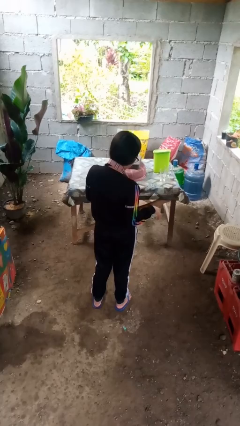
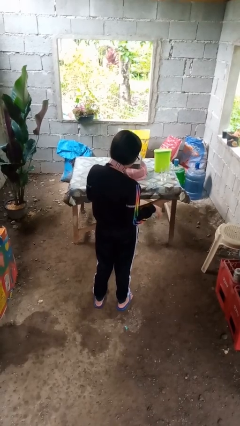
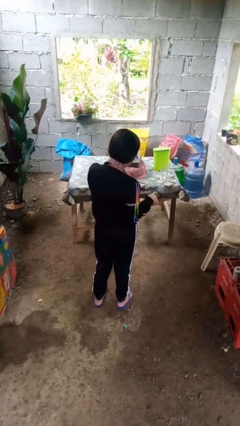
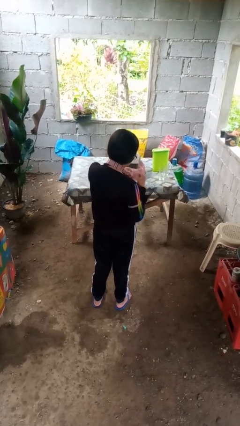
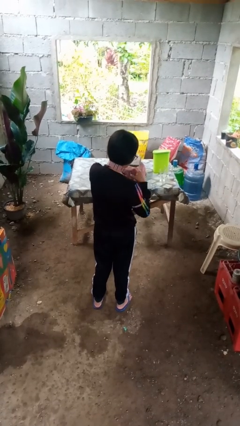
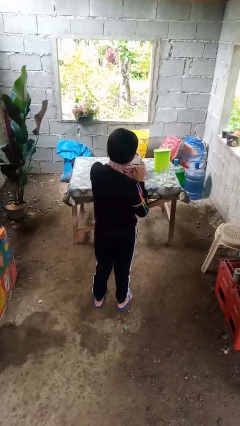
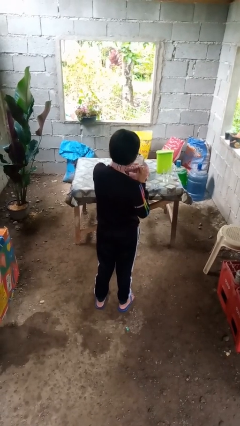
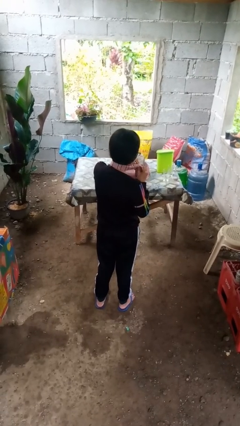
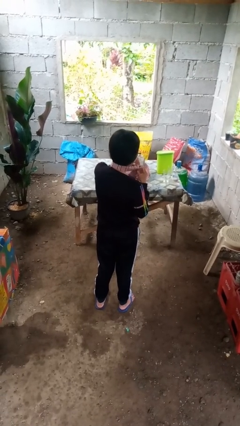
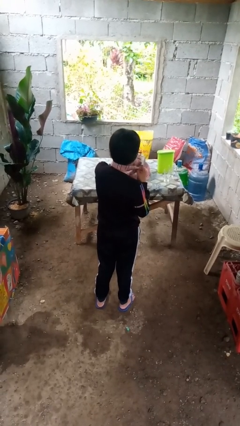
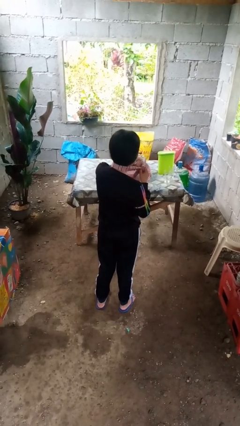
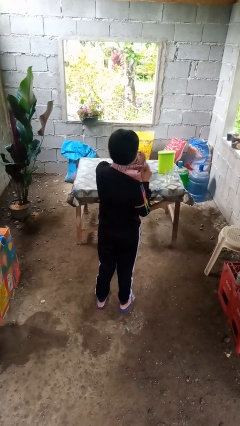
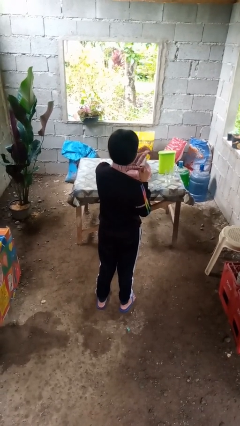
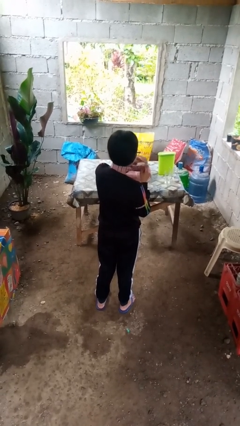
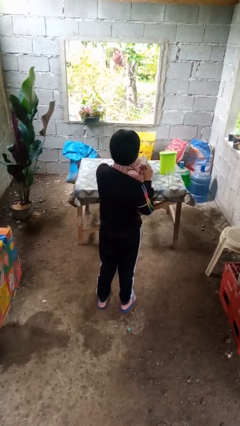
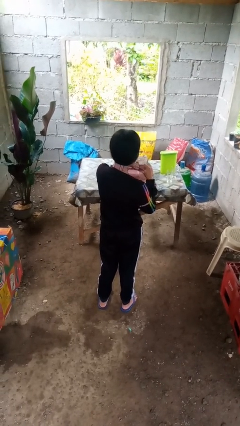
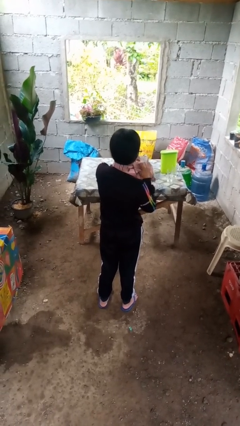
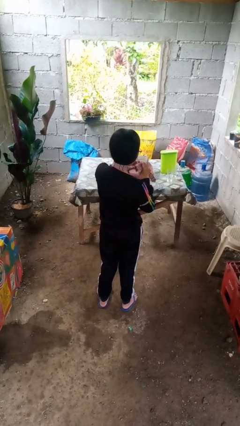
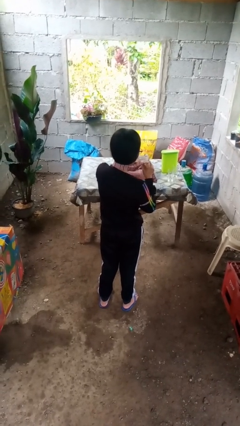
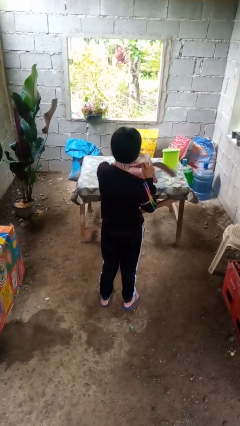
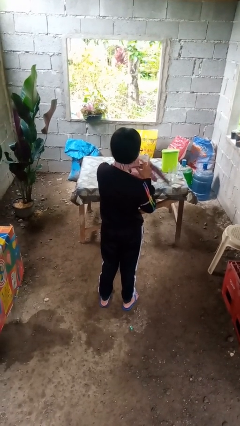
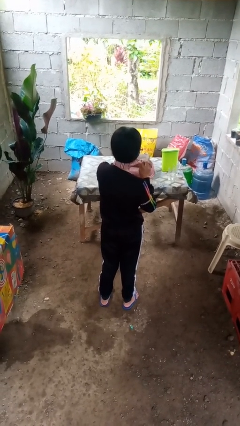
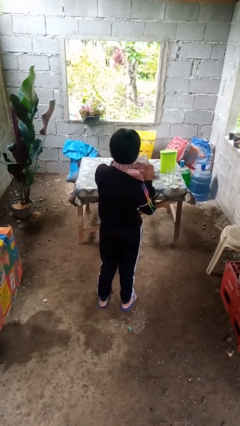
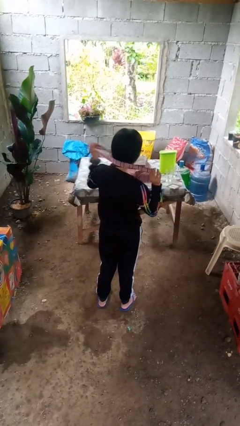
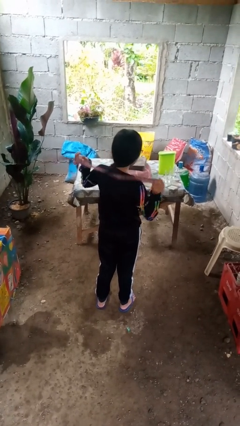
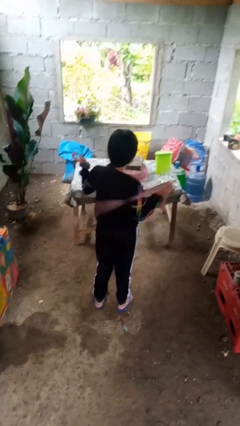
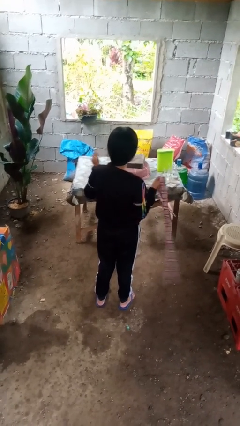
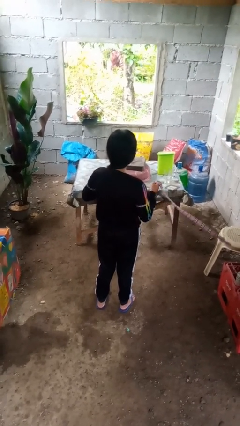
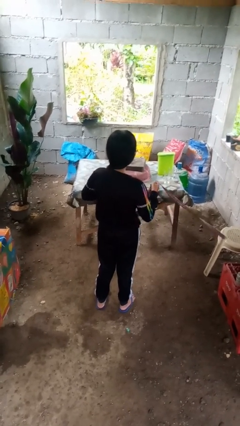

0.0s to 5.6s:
person takes off necktie

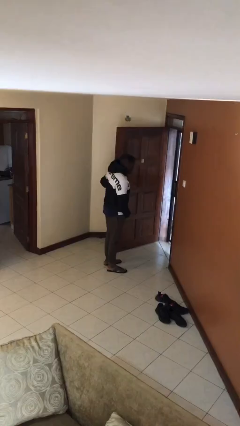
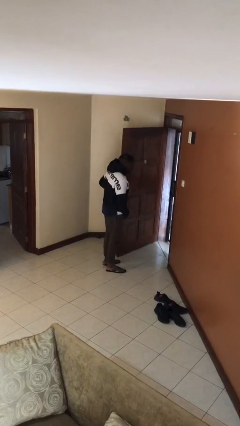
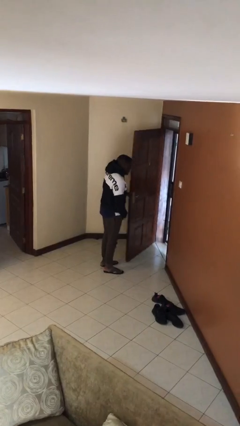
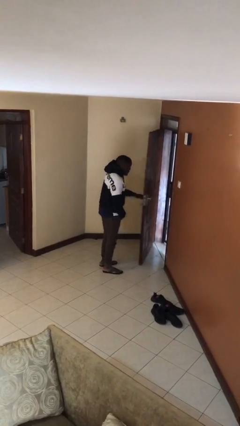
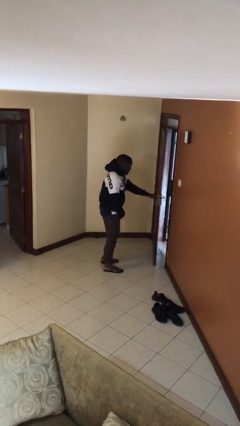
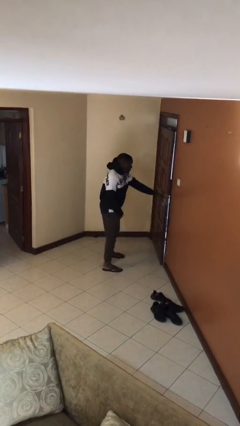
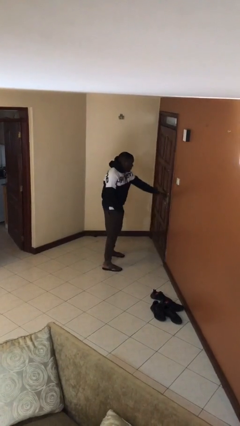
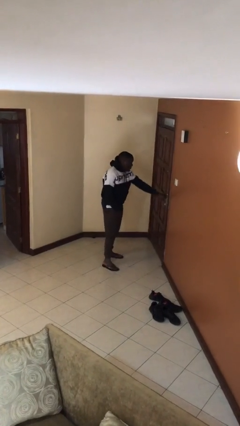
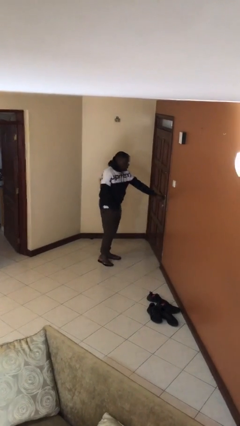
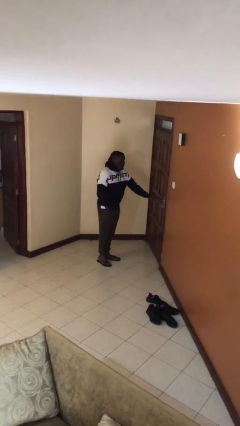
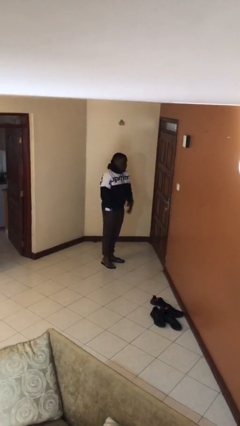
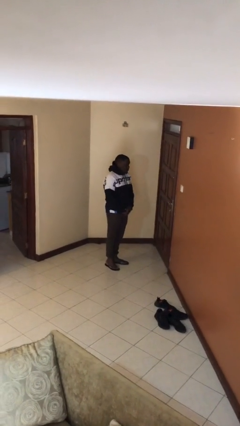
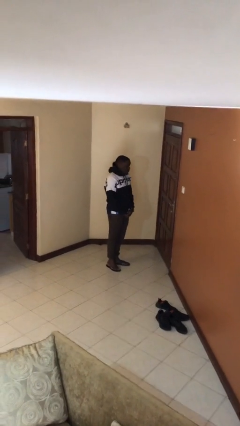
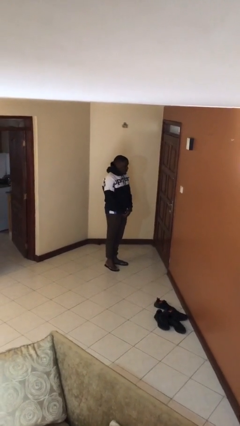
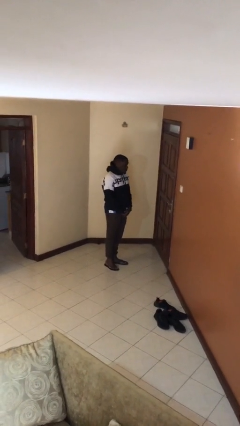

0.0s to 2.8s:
person closes facility door

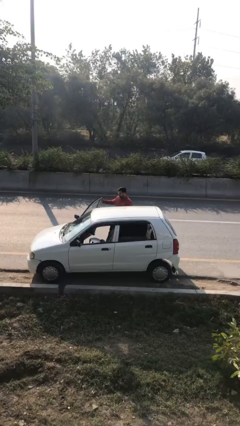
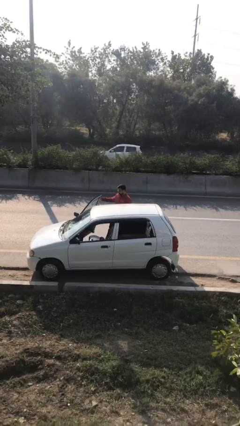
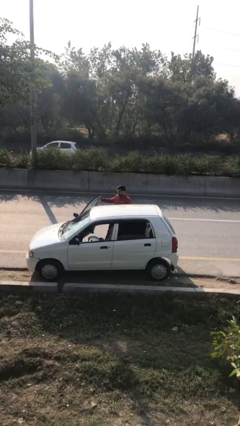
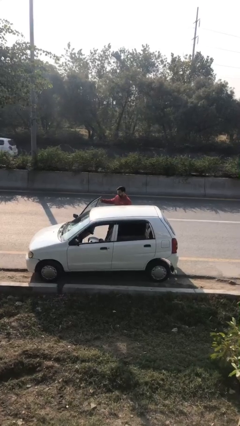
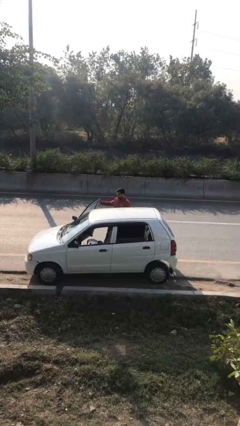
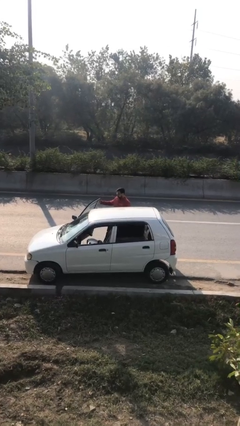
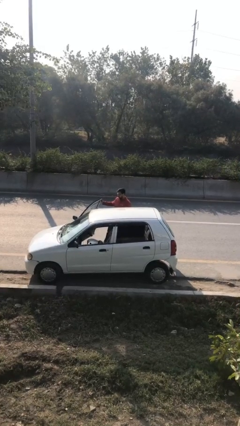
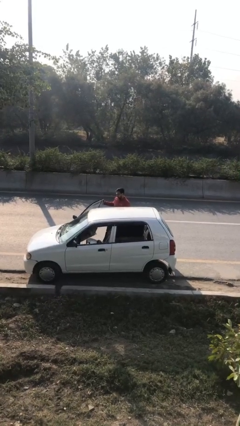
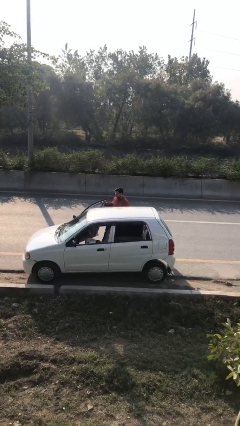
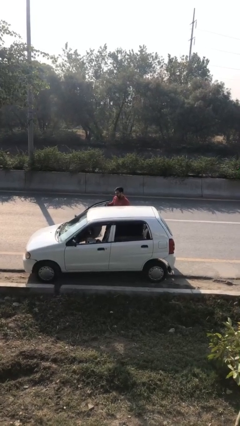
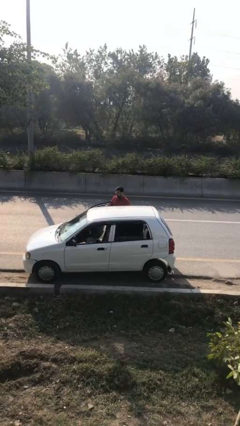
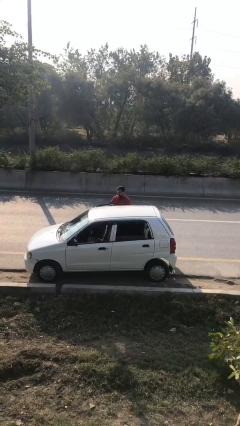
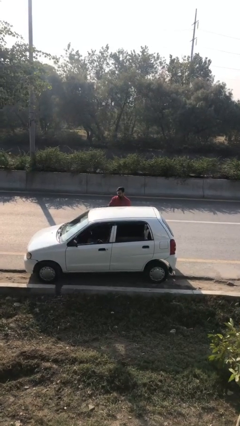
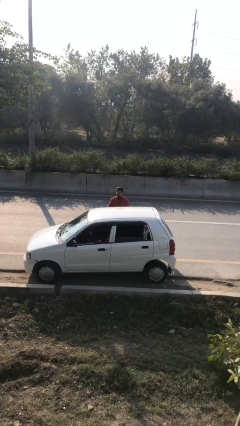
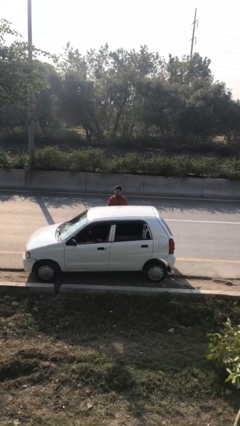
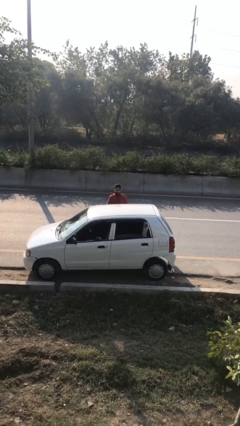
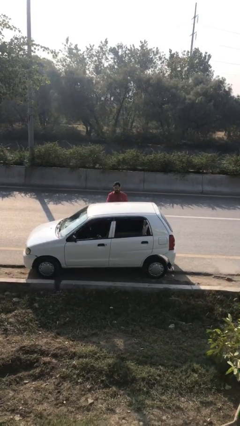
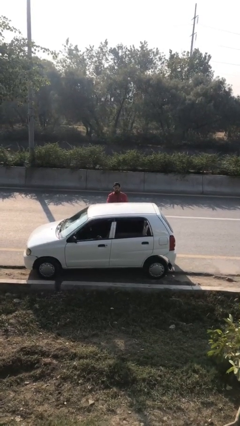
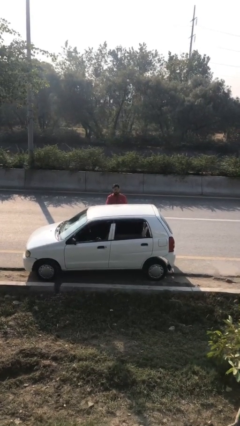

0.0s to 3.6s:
person closes car door

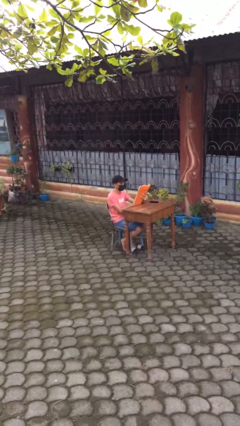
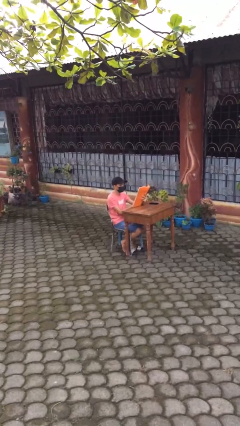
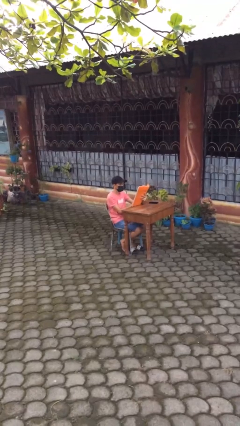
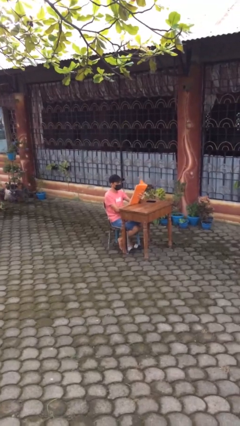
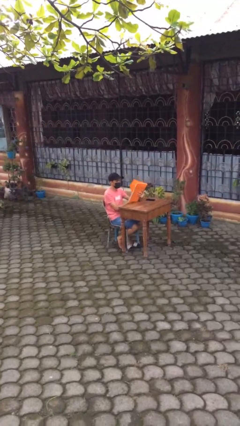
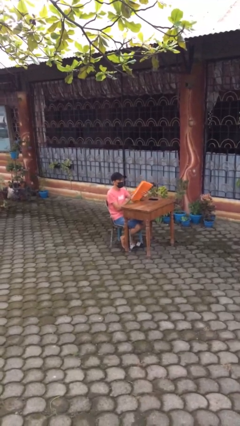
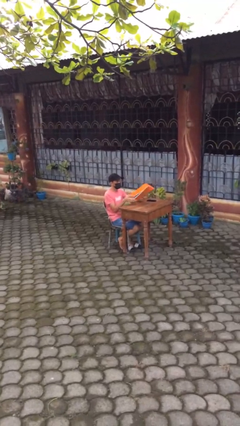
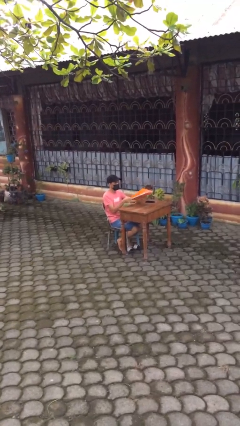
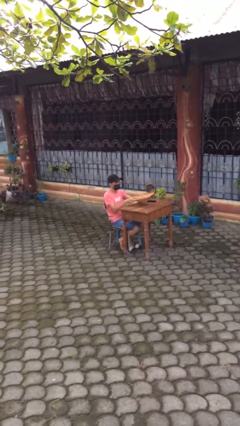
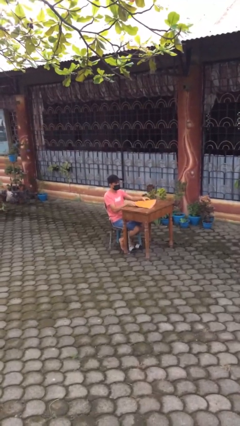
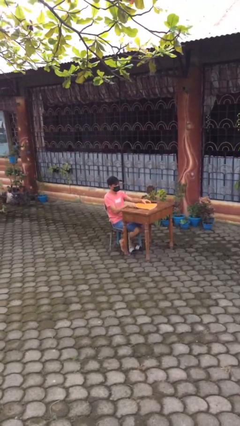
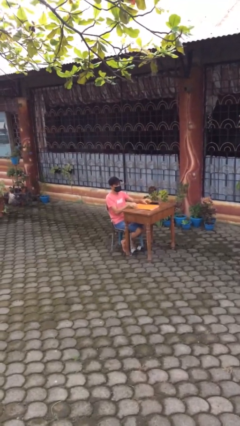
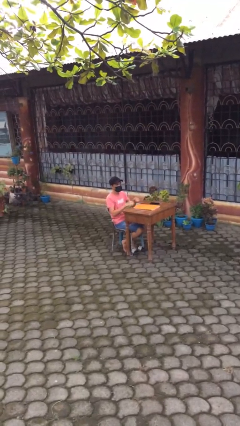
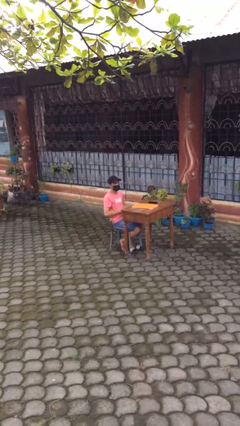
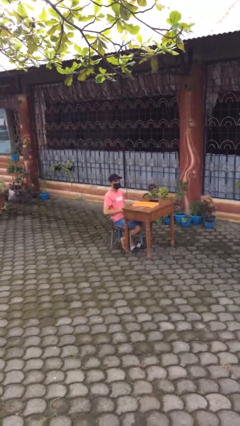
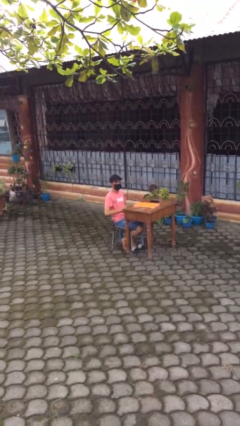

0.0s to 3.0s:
person puts down object on table

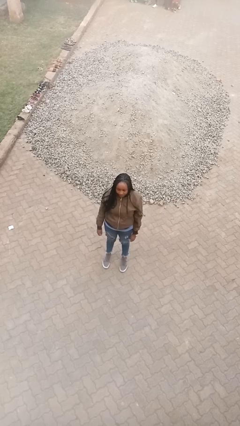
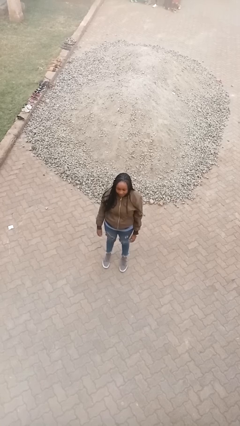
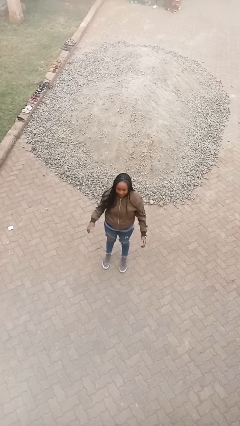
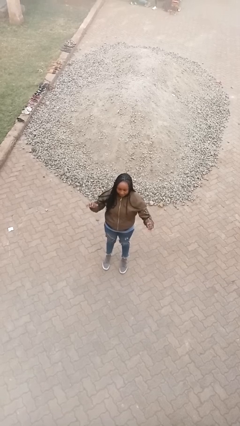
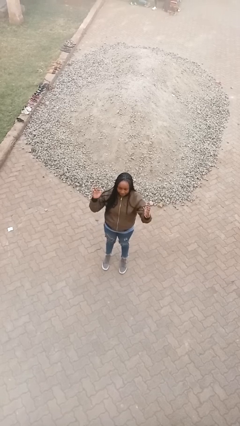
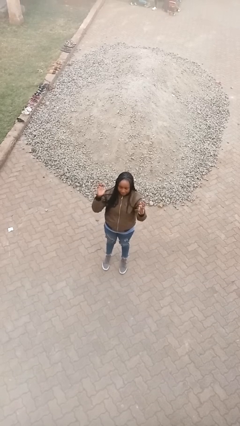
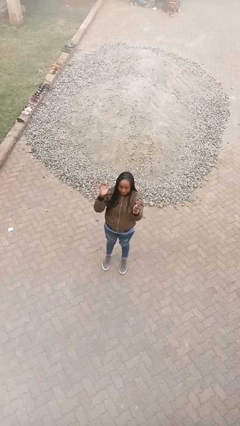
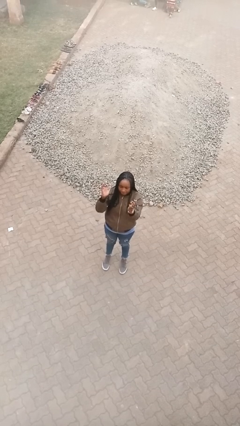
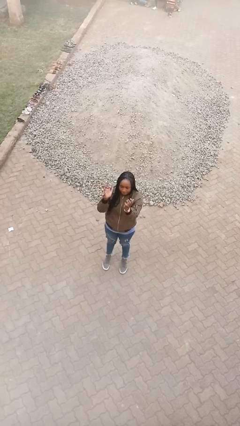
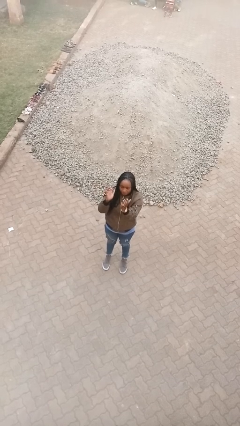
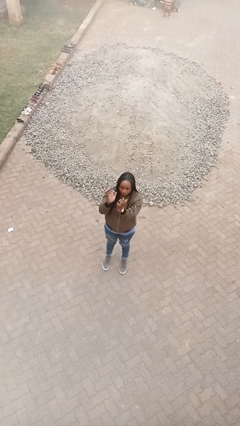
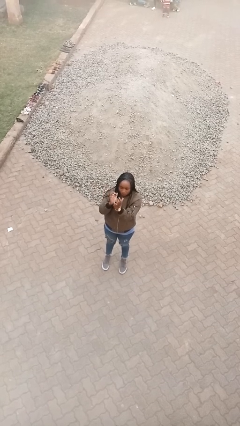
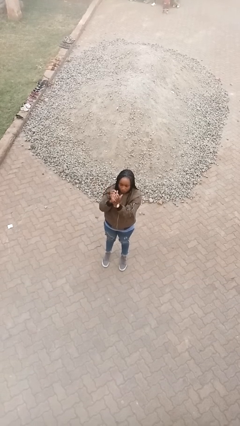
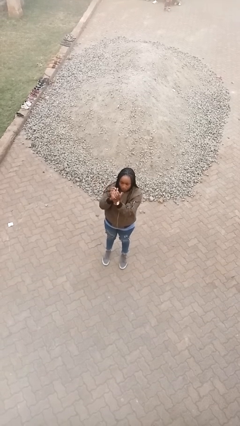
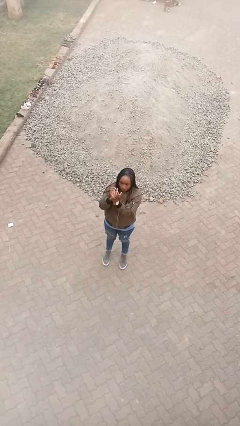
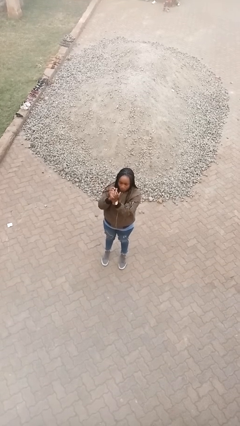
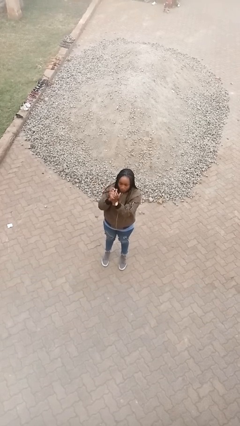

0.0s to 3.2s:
person gestures zoom in
